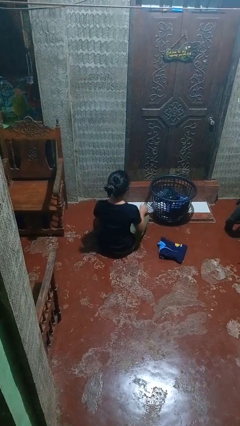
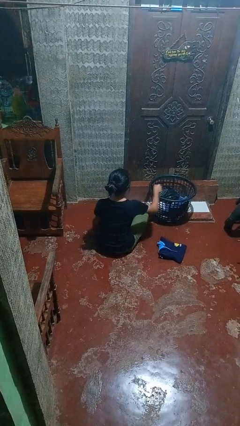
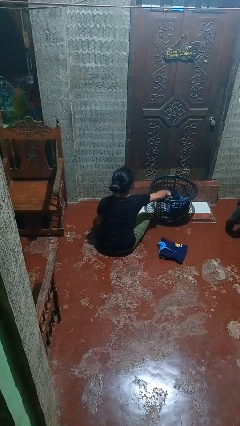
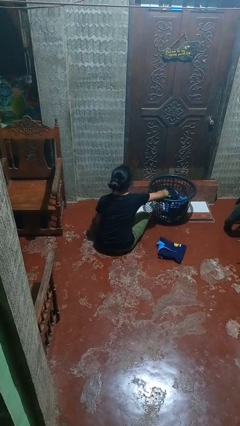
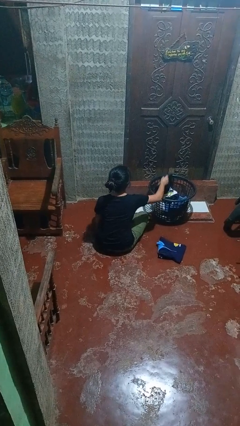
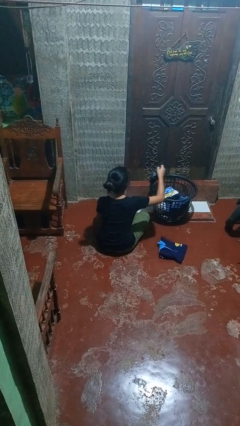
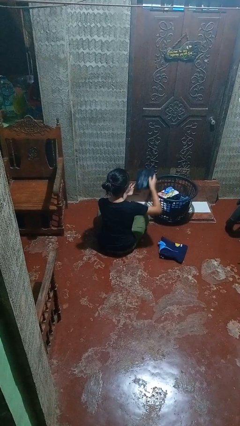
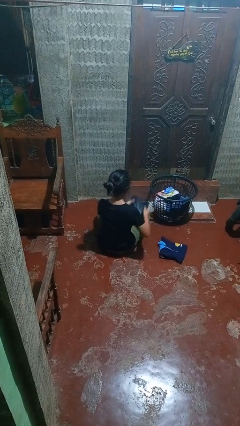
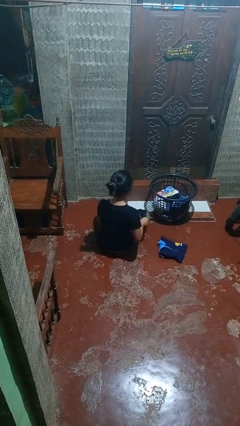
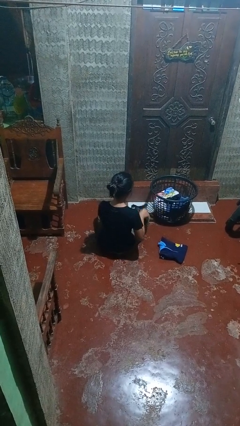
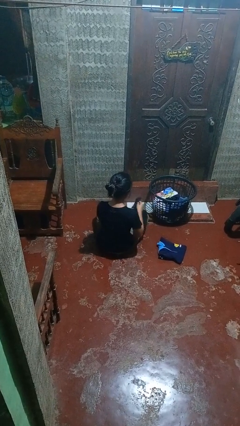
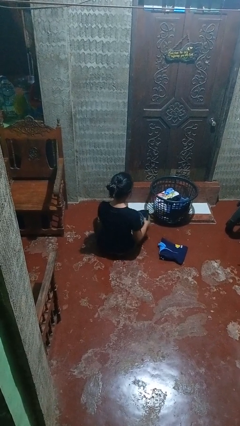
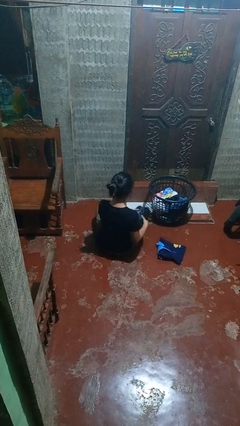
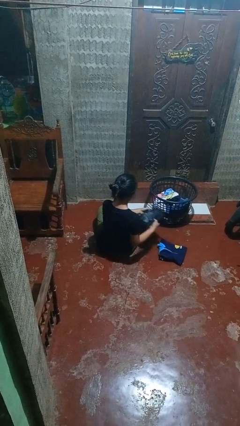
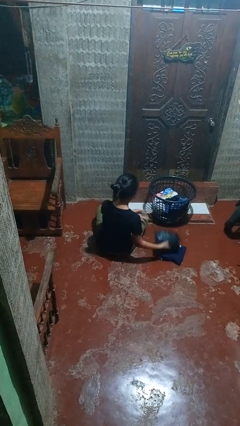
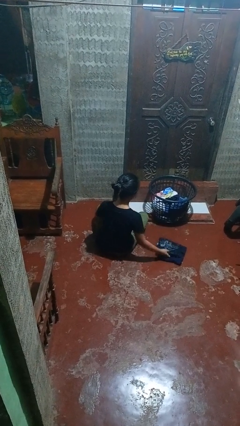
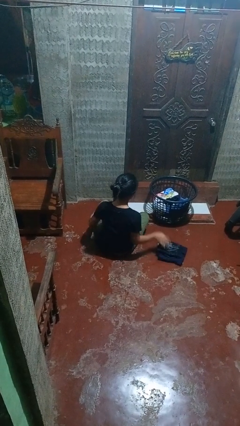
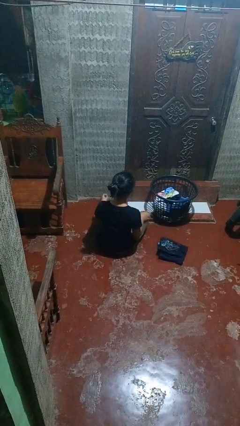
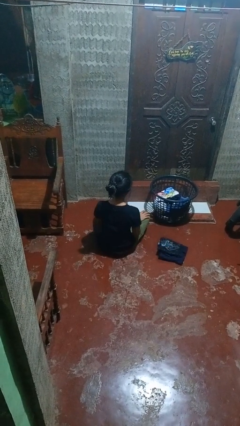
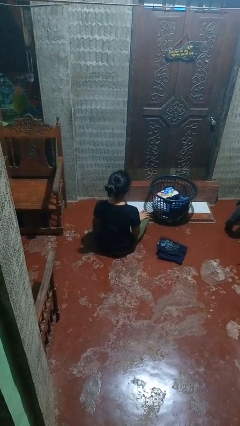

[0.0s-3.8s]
person folds shirt

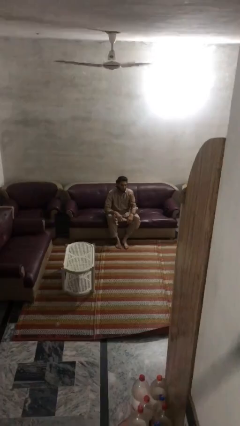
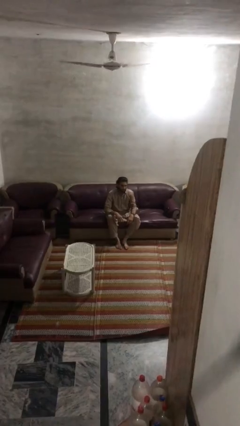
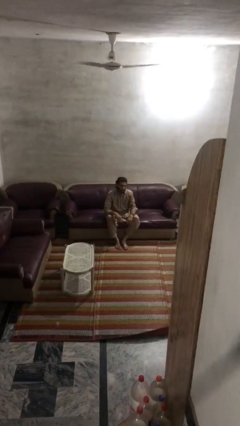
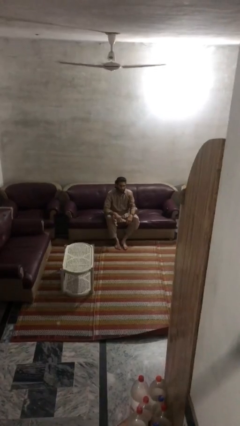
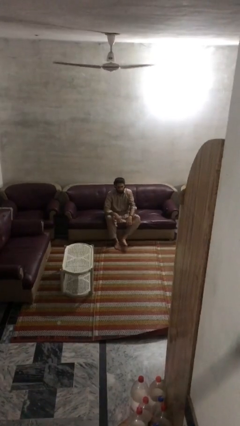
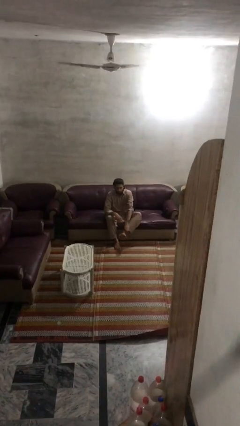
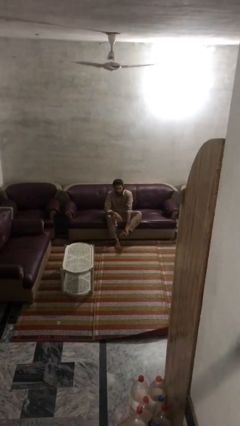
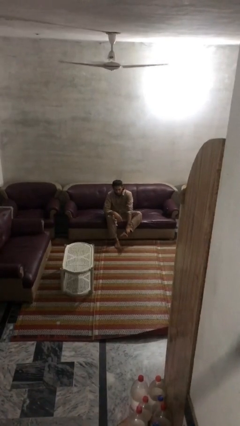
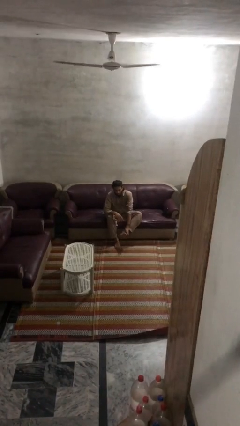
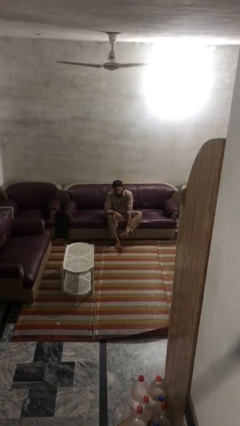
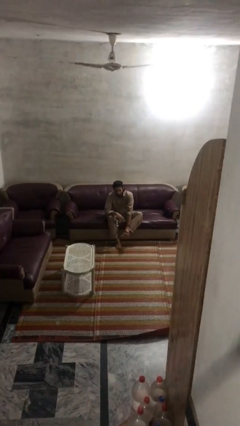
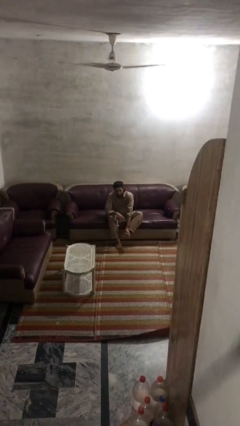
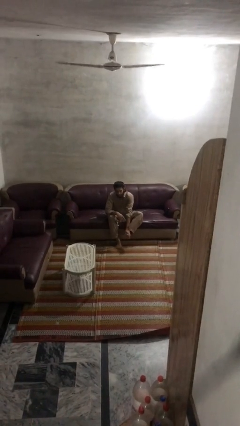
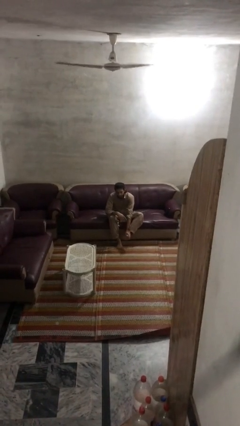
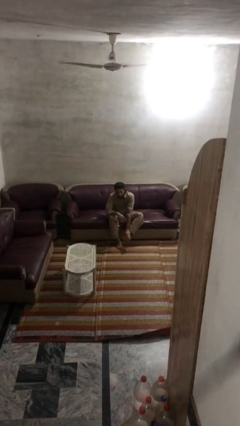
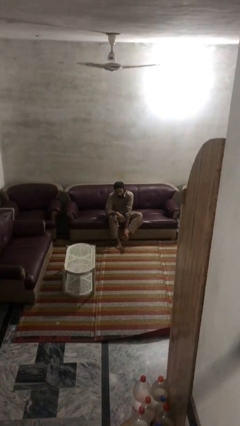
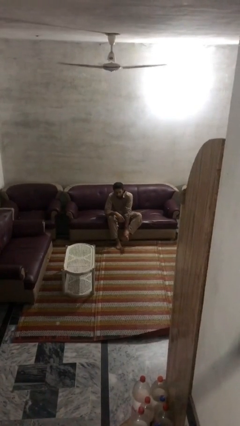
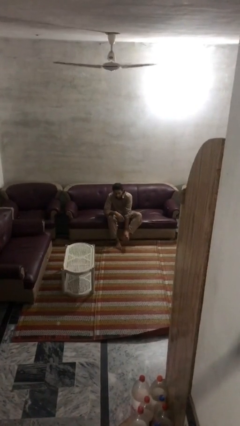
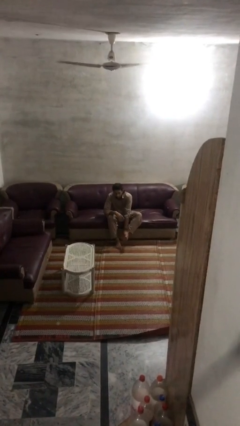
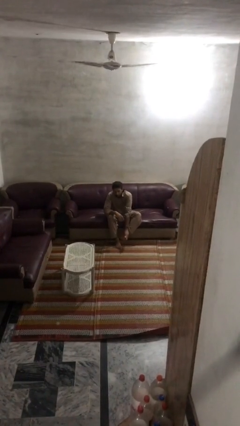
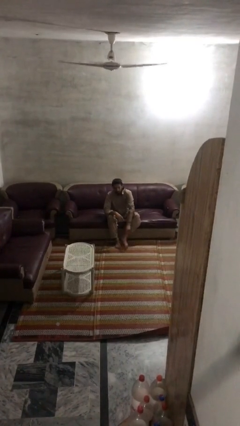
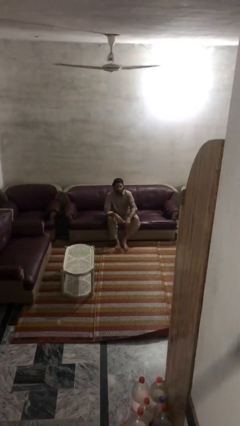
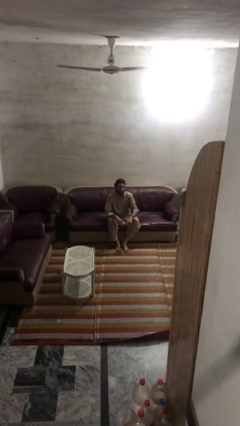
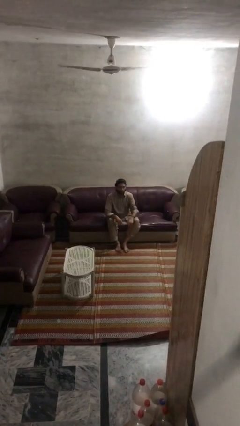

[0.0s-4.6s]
person rubs foot

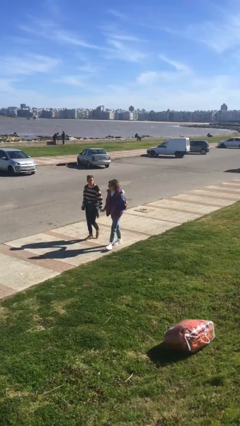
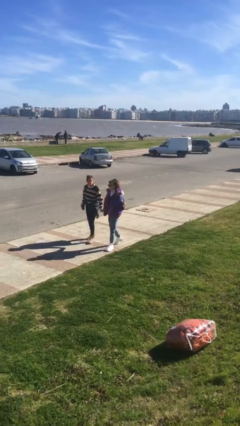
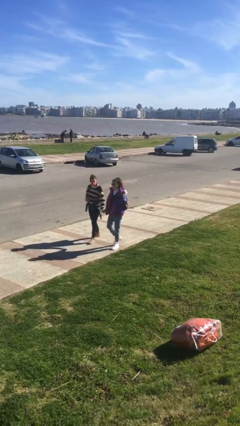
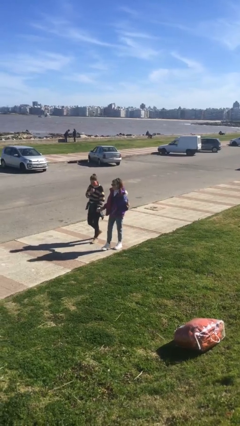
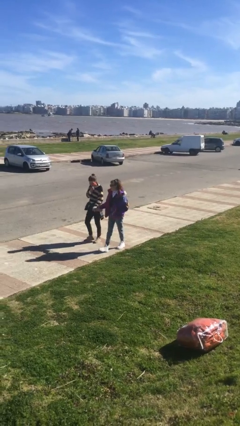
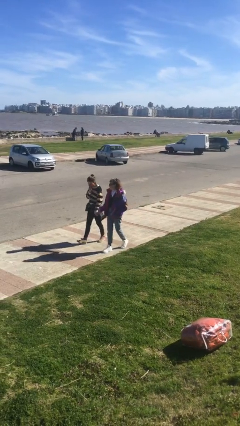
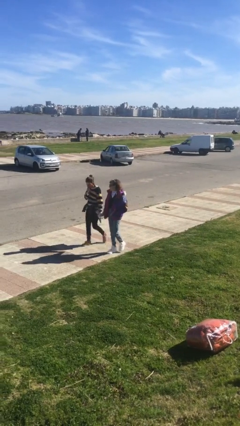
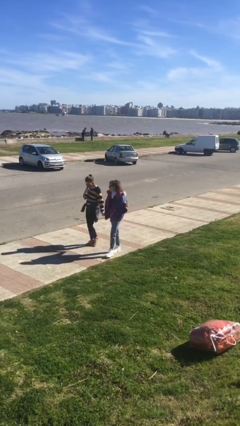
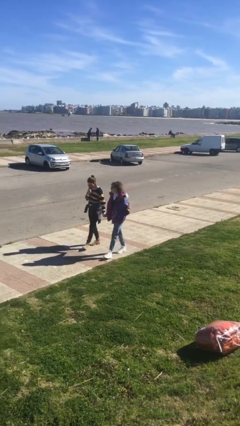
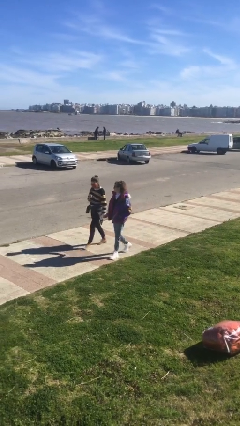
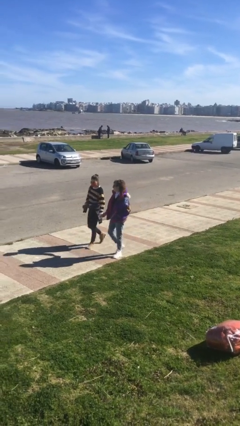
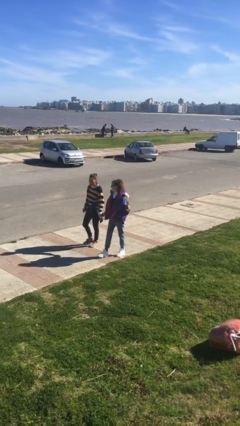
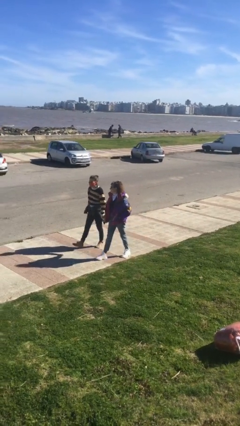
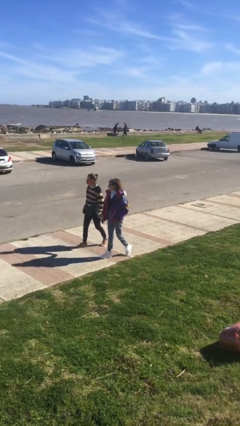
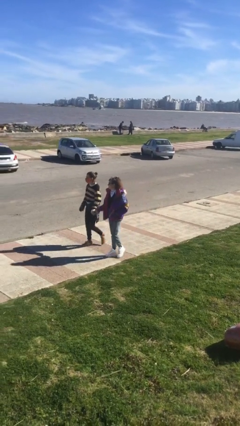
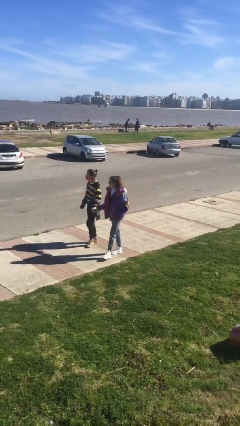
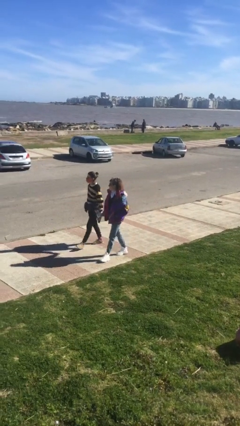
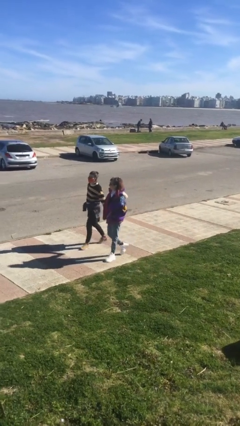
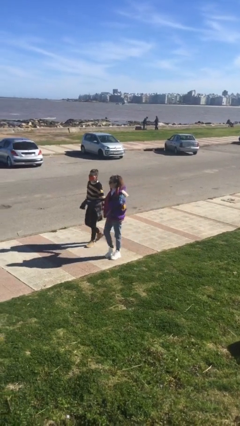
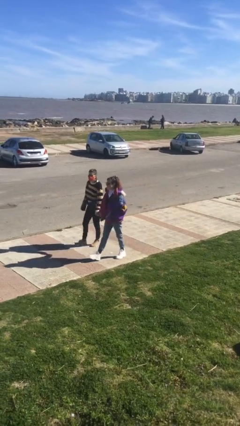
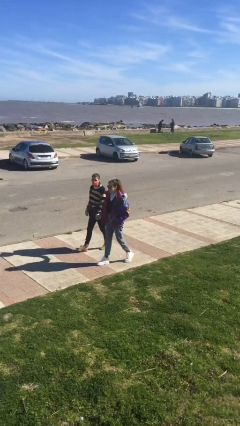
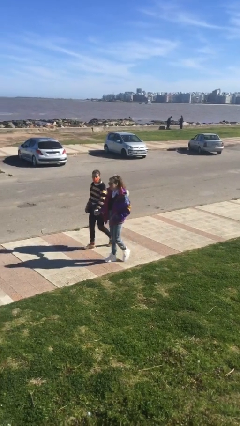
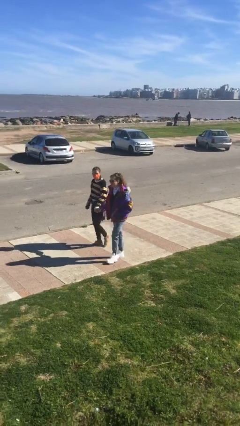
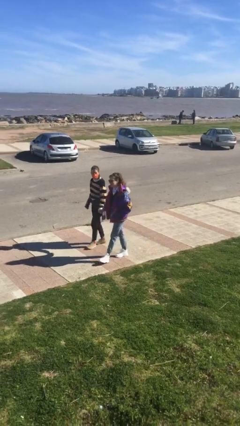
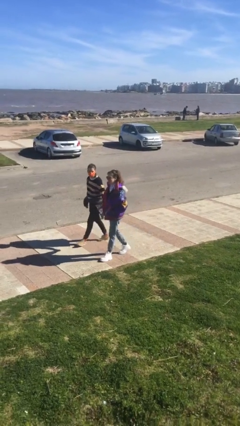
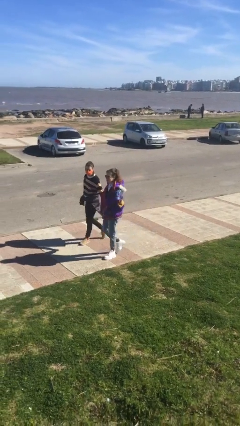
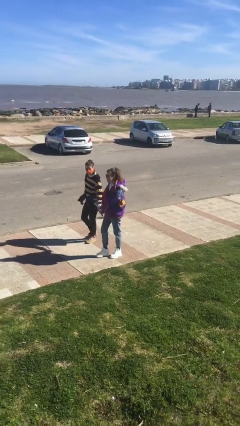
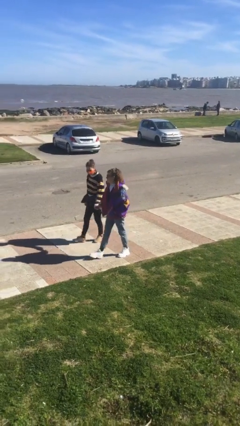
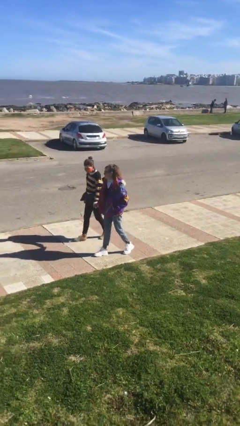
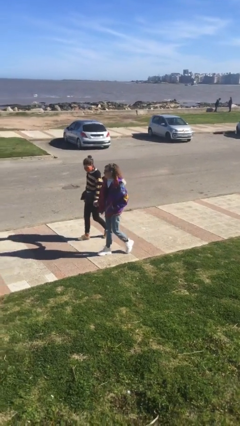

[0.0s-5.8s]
person holds hand

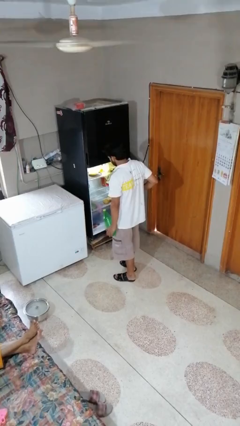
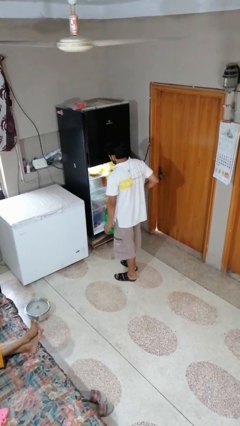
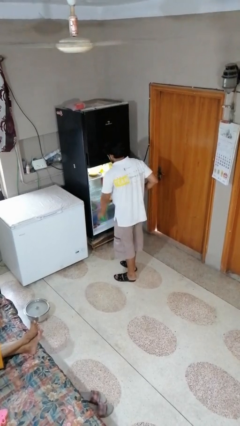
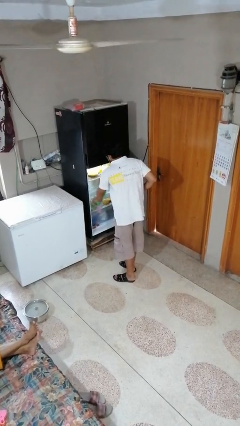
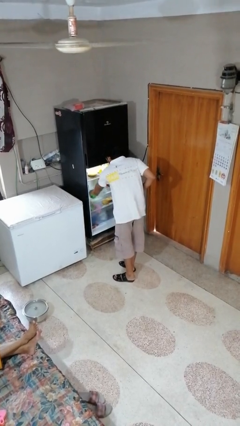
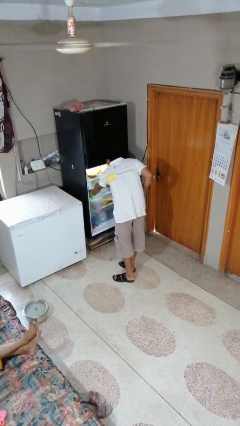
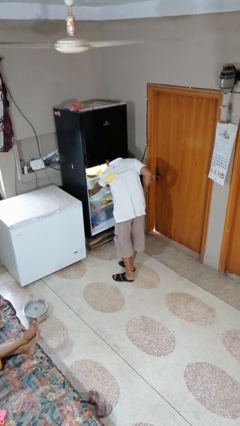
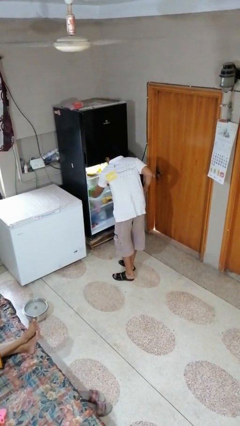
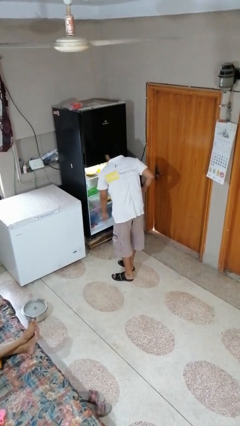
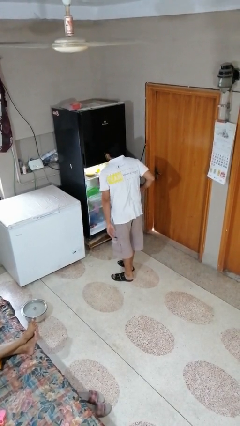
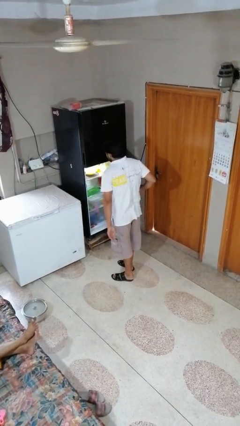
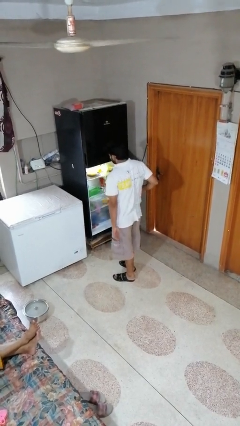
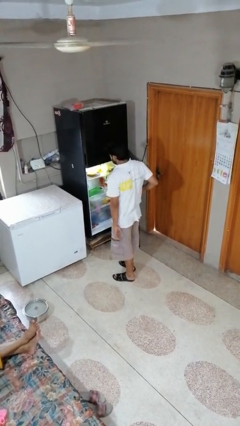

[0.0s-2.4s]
person puts object into refrigerator

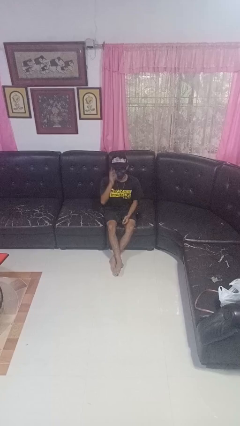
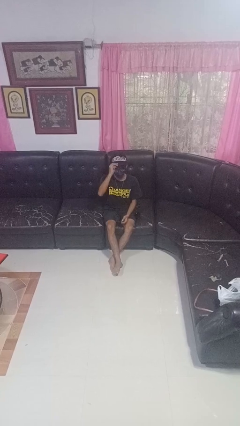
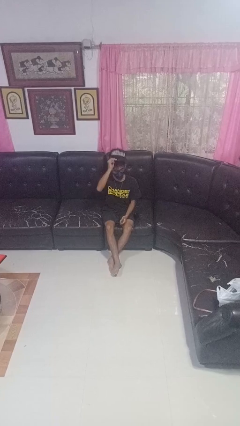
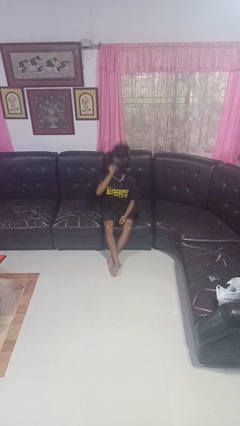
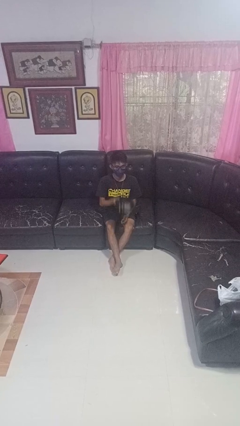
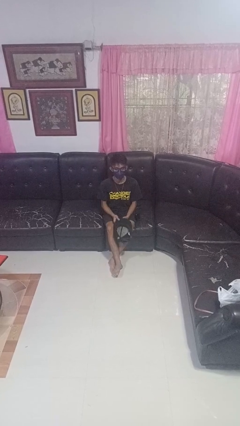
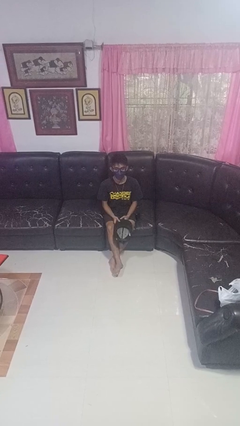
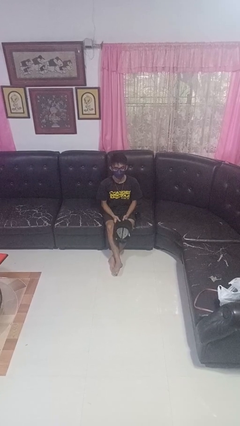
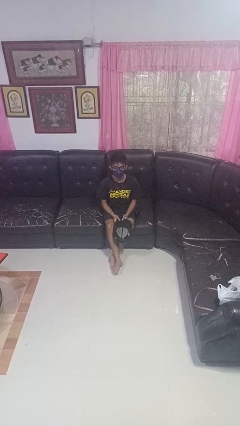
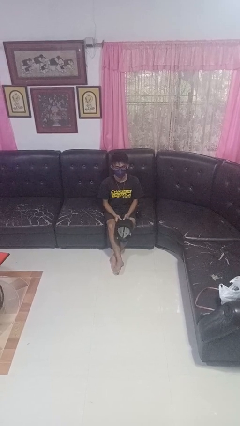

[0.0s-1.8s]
person takes off hat
